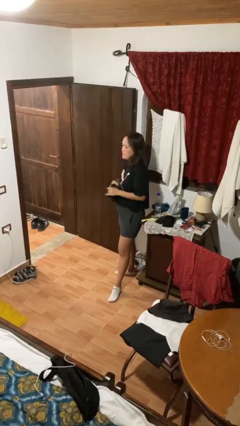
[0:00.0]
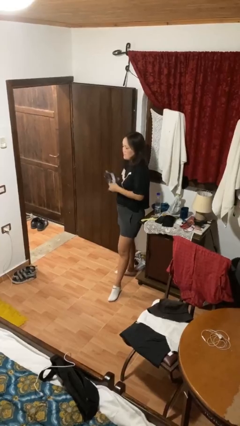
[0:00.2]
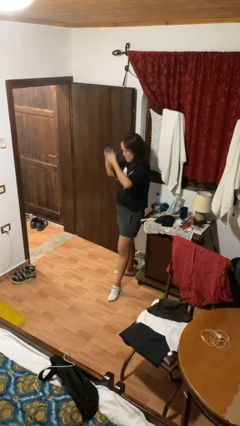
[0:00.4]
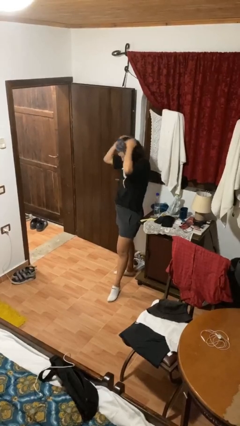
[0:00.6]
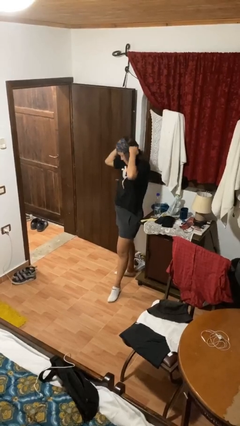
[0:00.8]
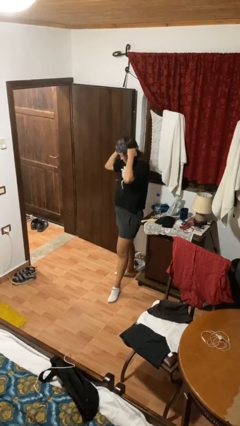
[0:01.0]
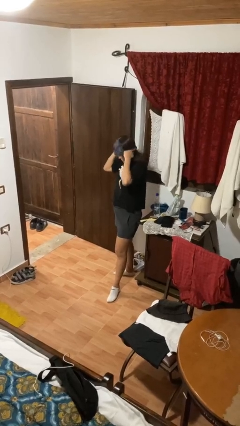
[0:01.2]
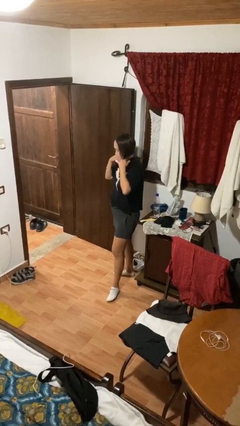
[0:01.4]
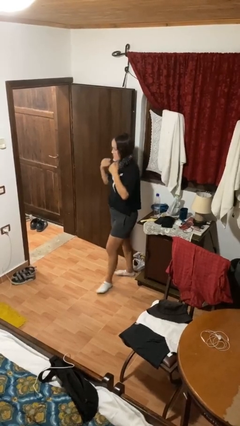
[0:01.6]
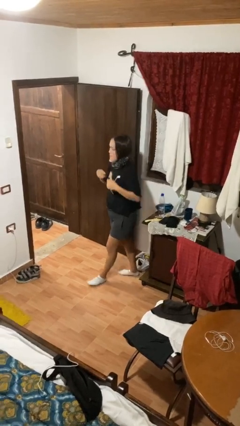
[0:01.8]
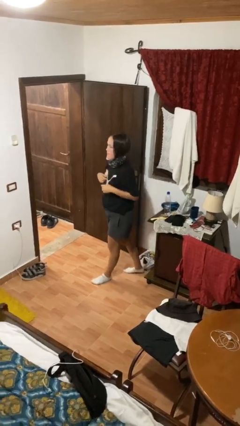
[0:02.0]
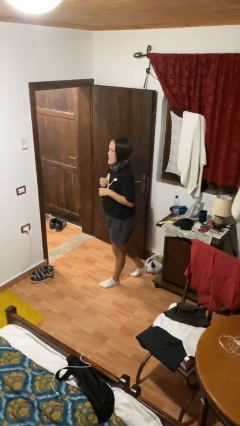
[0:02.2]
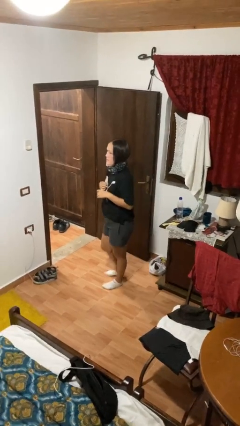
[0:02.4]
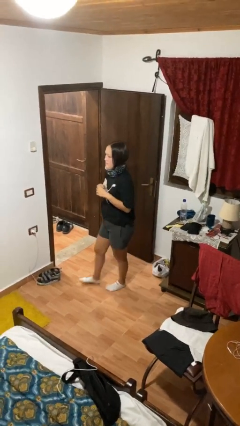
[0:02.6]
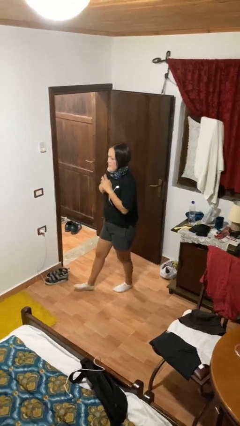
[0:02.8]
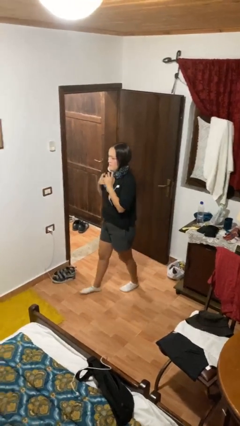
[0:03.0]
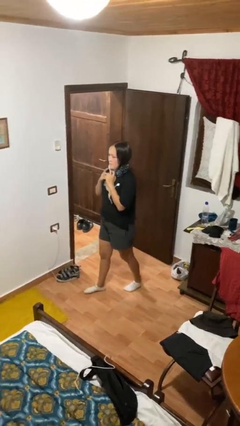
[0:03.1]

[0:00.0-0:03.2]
person puts on scarf

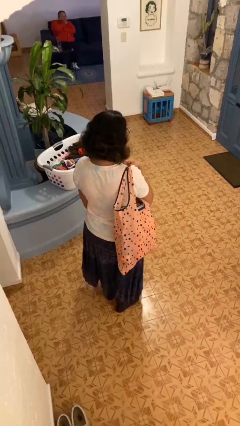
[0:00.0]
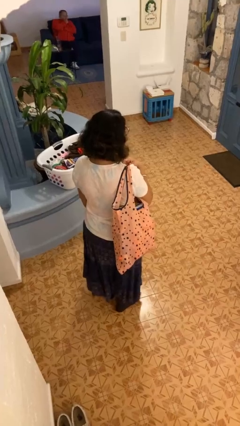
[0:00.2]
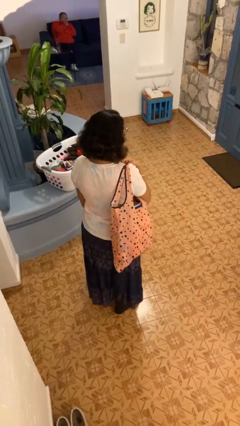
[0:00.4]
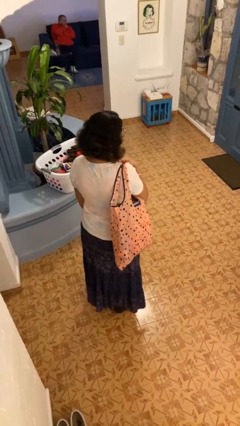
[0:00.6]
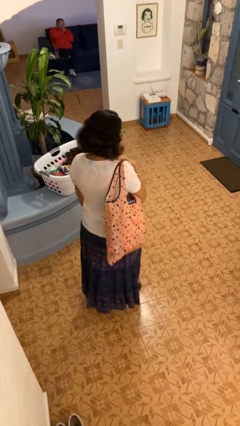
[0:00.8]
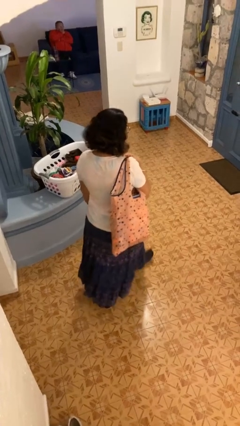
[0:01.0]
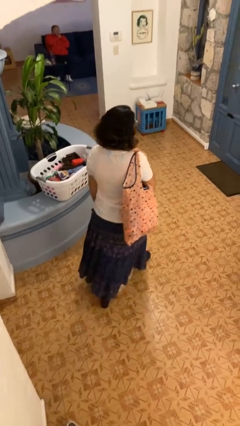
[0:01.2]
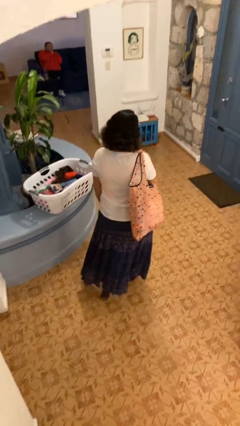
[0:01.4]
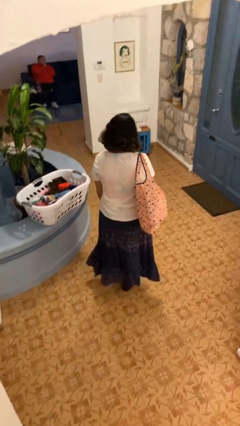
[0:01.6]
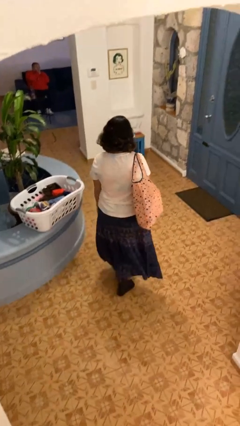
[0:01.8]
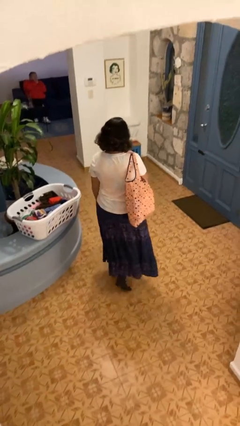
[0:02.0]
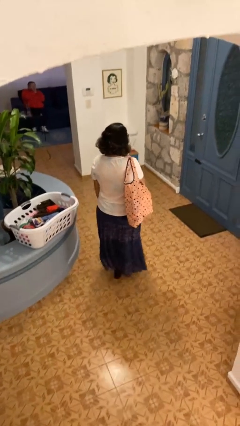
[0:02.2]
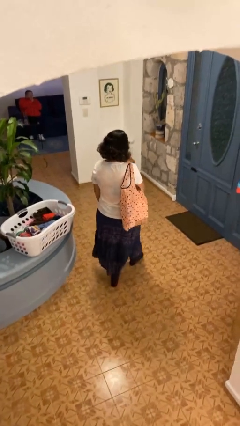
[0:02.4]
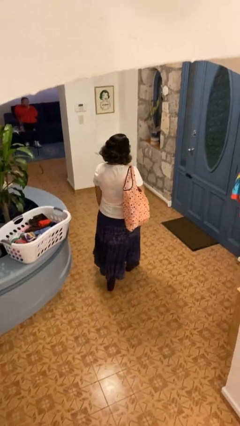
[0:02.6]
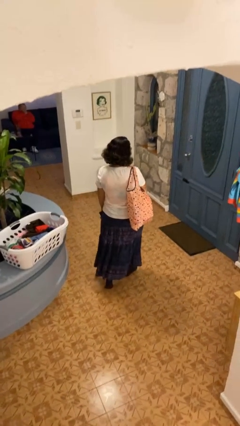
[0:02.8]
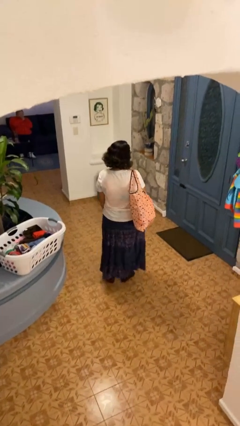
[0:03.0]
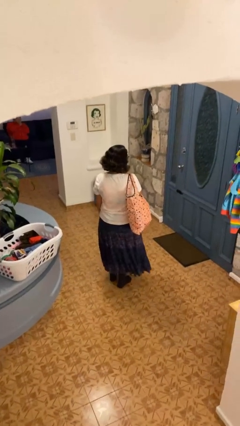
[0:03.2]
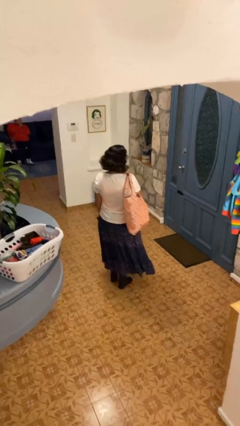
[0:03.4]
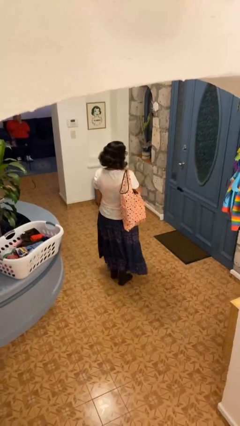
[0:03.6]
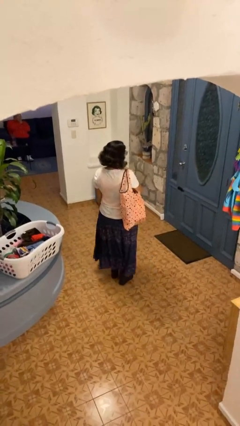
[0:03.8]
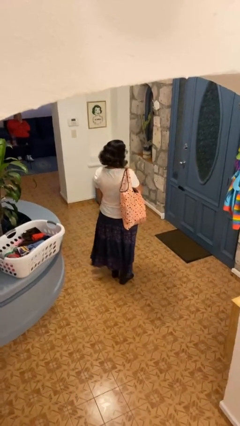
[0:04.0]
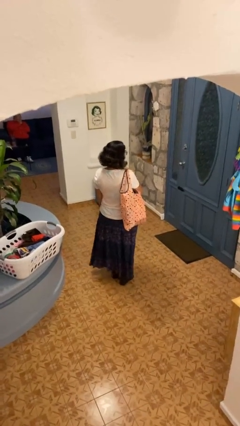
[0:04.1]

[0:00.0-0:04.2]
person carries groceries

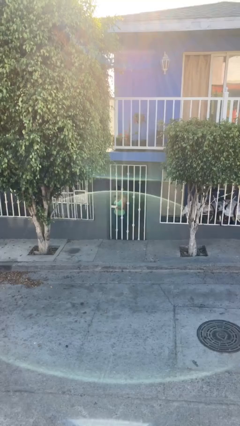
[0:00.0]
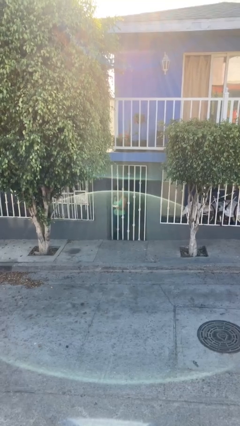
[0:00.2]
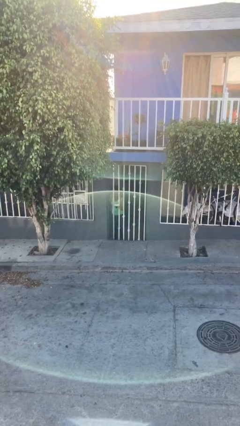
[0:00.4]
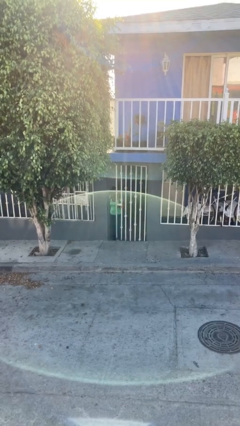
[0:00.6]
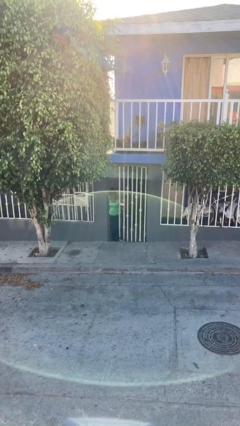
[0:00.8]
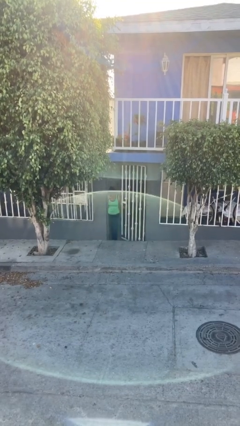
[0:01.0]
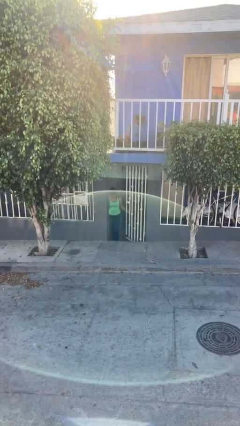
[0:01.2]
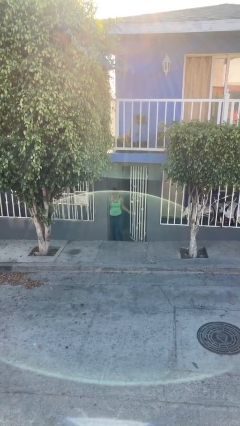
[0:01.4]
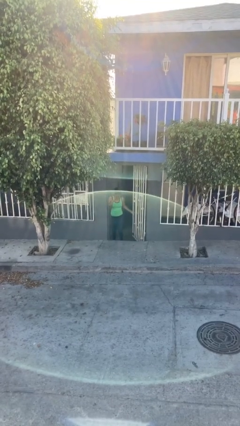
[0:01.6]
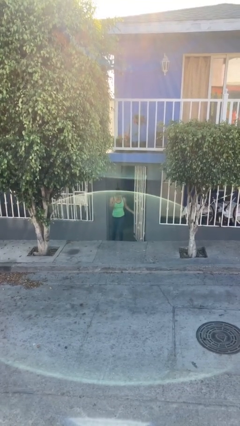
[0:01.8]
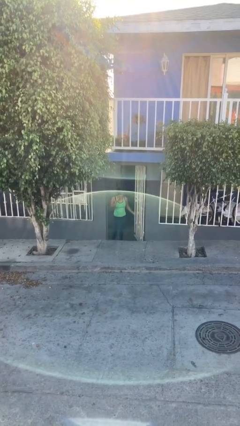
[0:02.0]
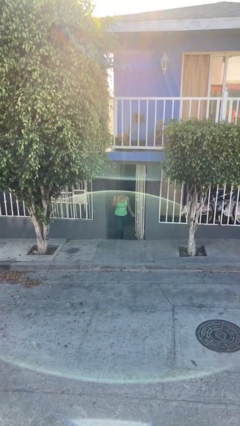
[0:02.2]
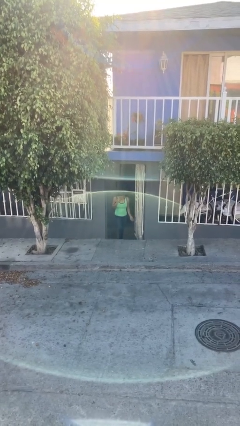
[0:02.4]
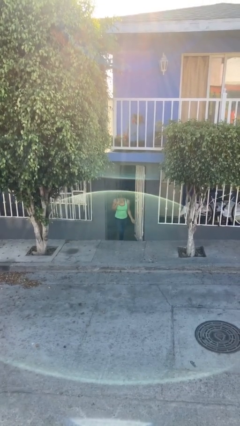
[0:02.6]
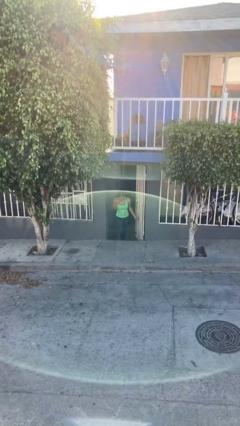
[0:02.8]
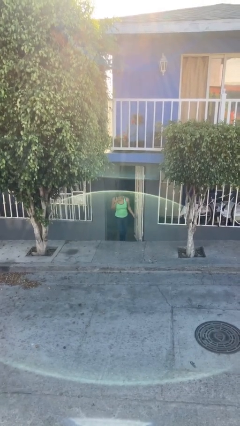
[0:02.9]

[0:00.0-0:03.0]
person opens facility door

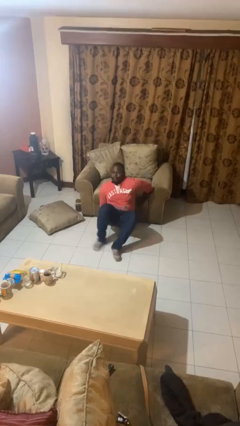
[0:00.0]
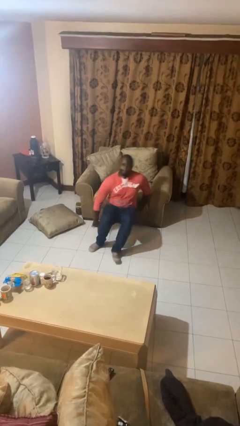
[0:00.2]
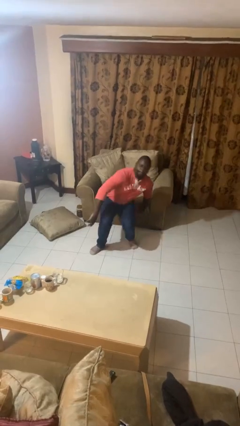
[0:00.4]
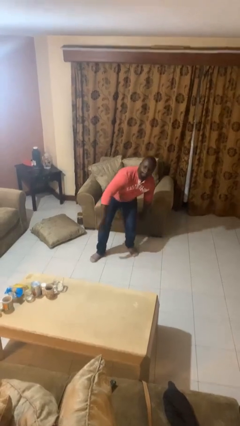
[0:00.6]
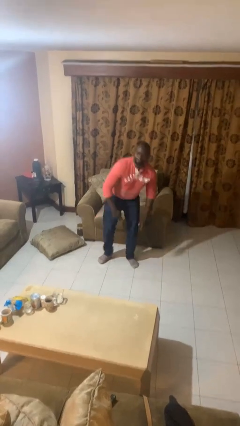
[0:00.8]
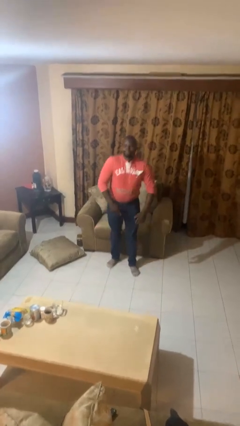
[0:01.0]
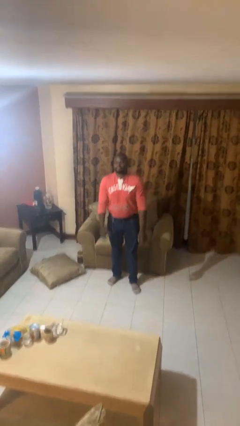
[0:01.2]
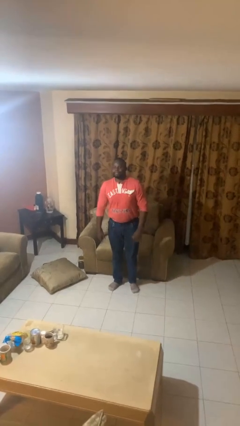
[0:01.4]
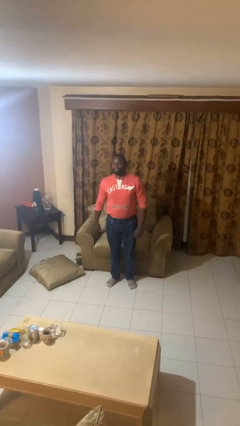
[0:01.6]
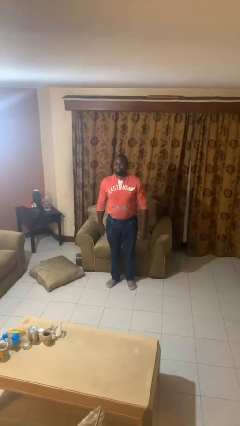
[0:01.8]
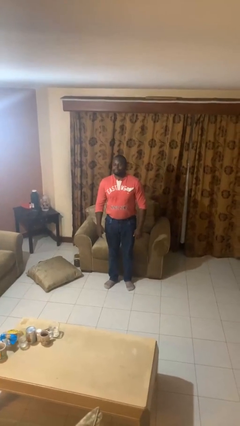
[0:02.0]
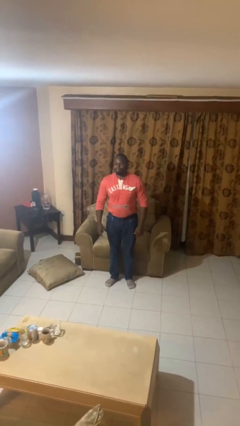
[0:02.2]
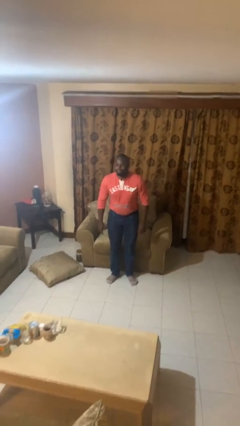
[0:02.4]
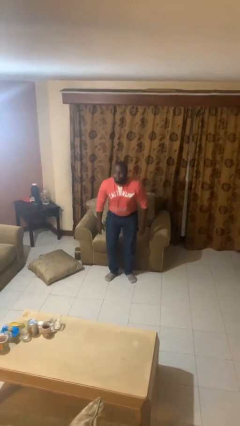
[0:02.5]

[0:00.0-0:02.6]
person stands up from floor

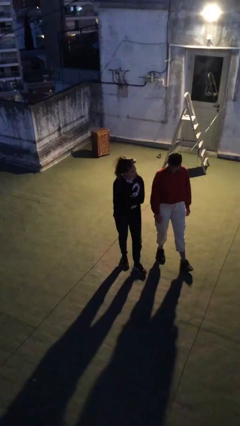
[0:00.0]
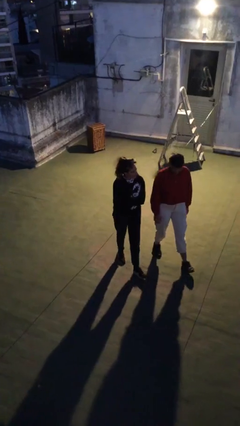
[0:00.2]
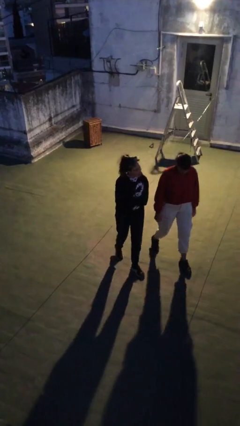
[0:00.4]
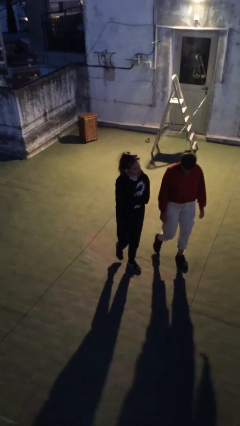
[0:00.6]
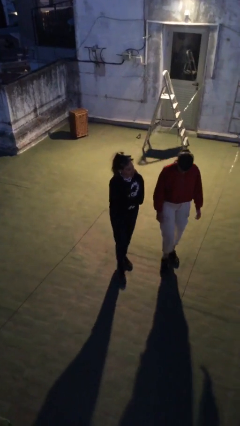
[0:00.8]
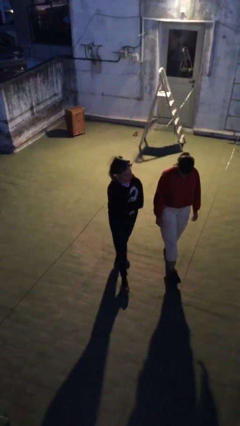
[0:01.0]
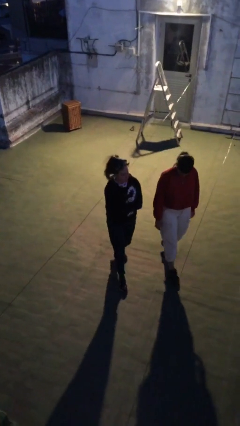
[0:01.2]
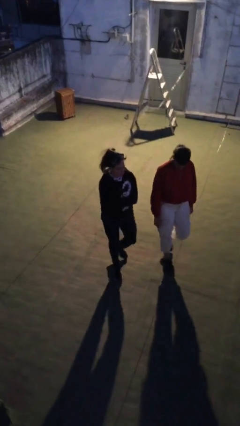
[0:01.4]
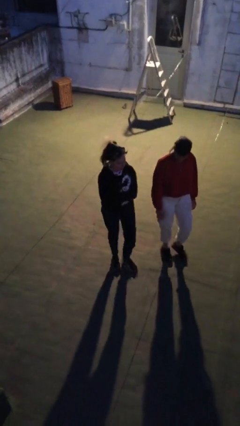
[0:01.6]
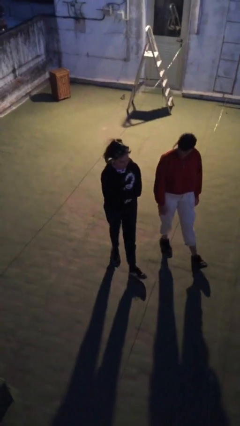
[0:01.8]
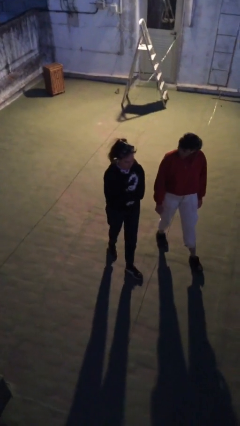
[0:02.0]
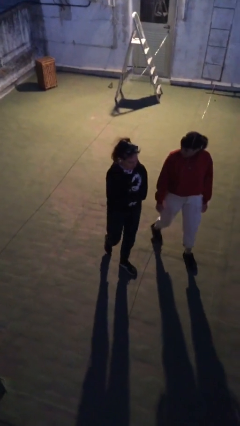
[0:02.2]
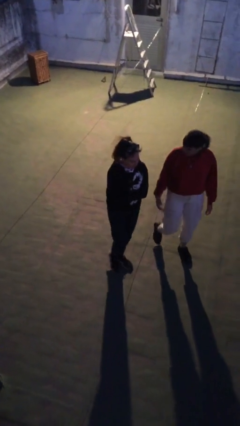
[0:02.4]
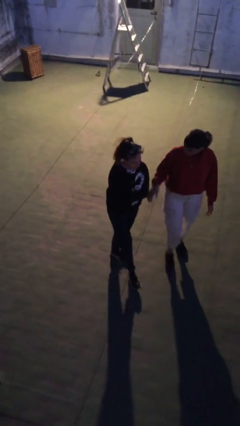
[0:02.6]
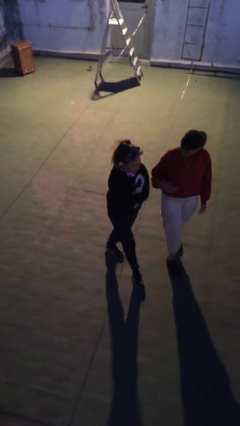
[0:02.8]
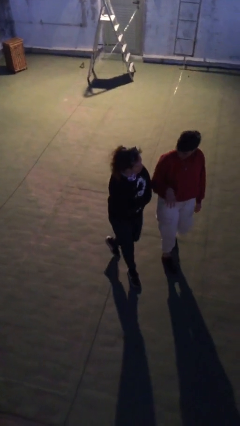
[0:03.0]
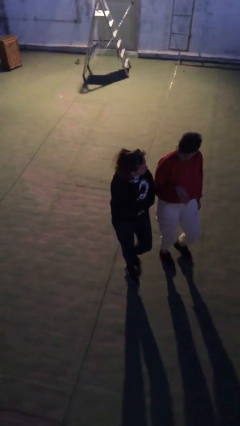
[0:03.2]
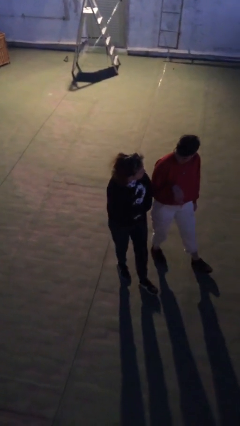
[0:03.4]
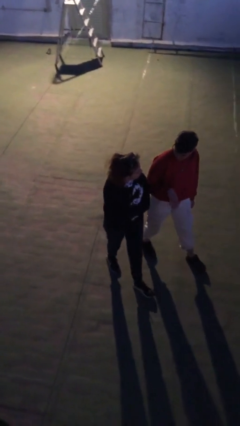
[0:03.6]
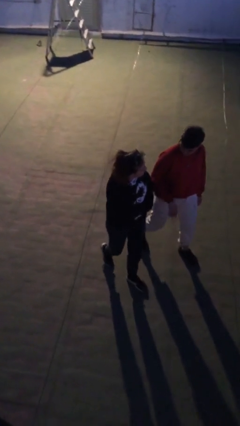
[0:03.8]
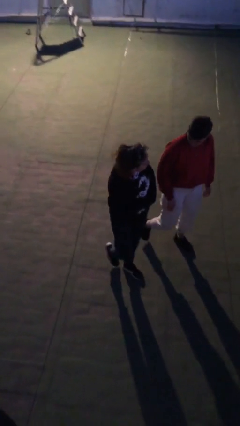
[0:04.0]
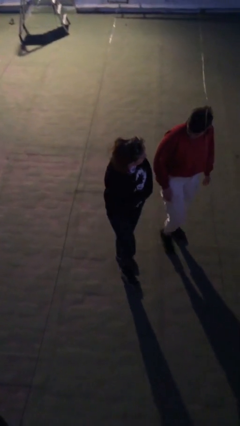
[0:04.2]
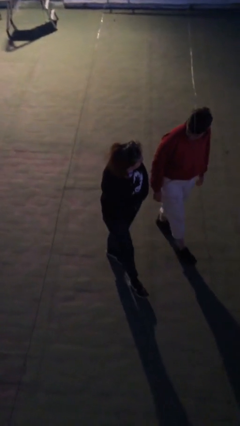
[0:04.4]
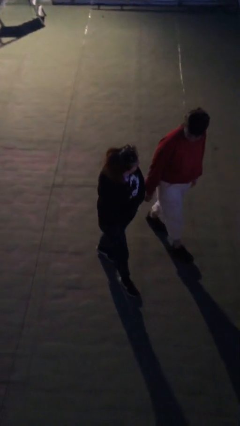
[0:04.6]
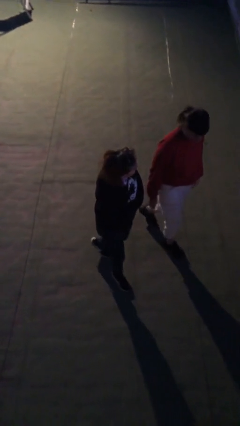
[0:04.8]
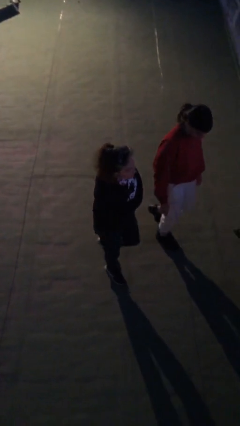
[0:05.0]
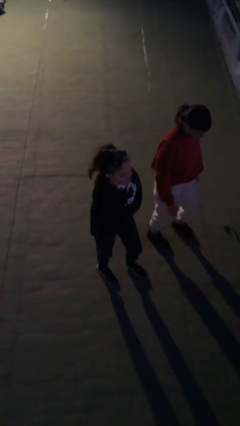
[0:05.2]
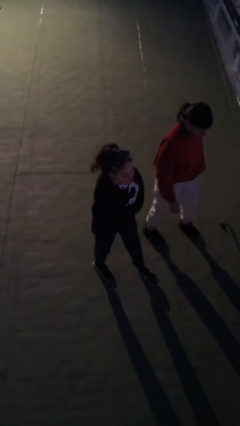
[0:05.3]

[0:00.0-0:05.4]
person talks to person
